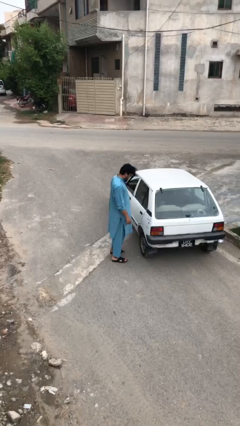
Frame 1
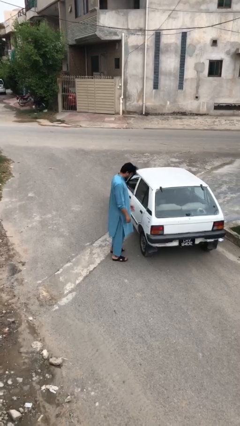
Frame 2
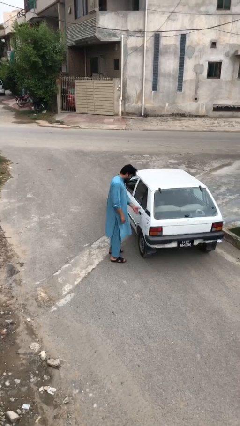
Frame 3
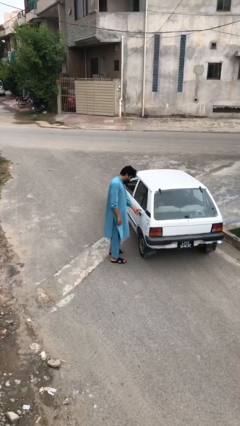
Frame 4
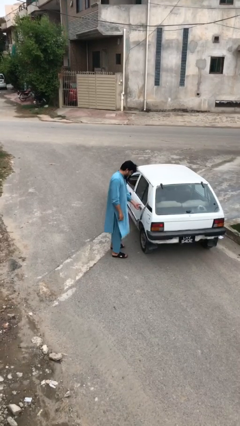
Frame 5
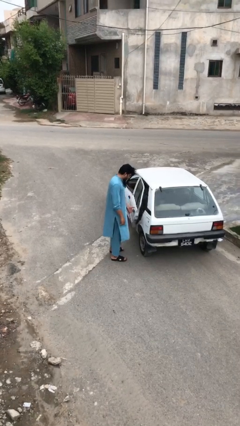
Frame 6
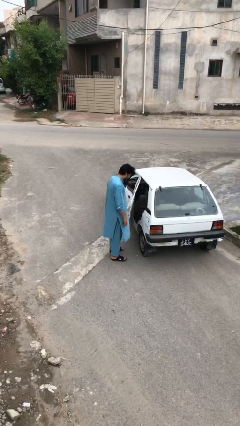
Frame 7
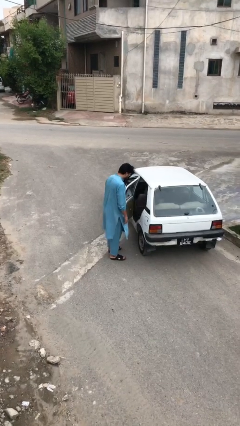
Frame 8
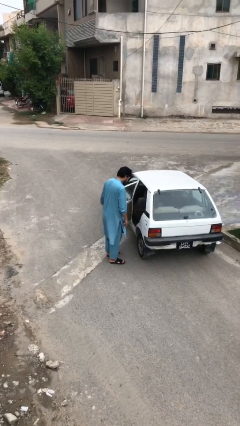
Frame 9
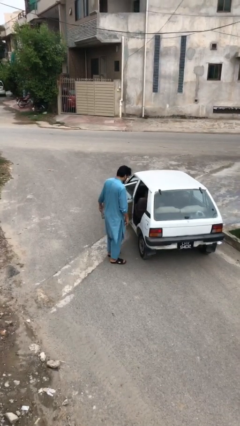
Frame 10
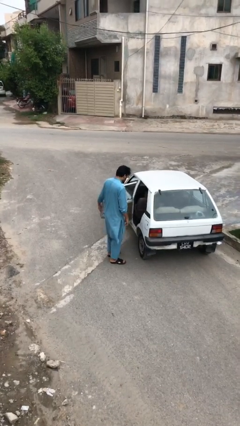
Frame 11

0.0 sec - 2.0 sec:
person opens car door

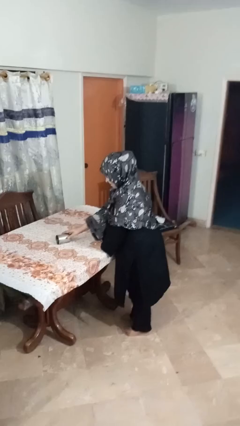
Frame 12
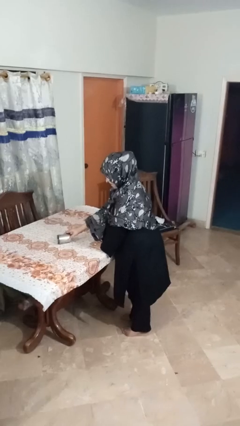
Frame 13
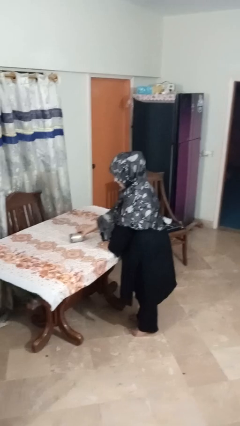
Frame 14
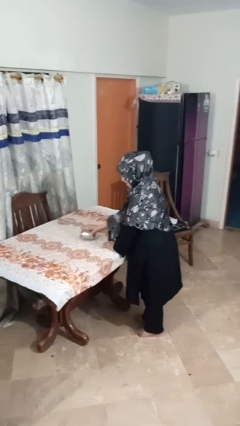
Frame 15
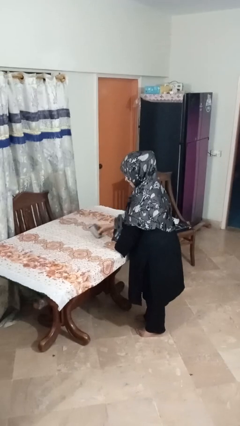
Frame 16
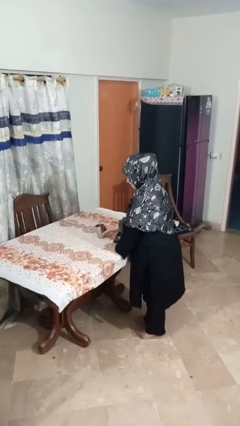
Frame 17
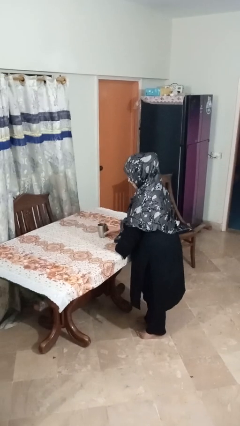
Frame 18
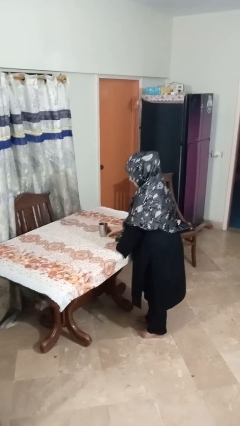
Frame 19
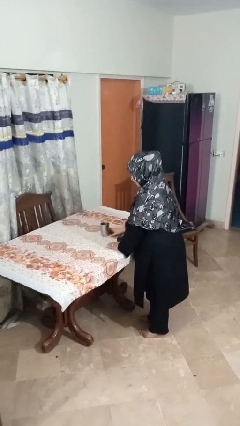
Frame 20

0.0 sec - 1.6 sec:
person knocks over glass

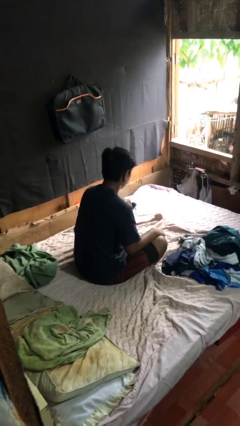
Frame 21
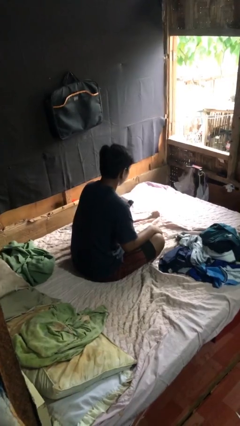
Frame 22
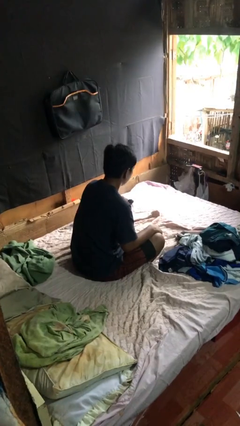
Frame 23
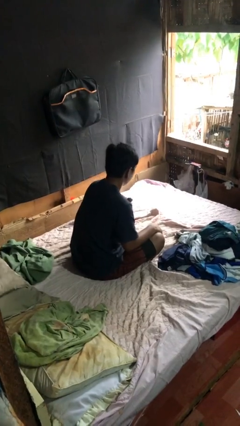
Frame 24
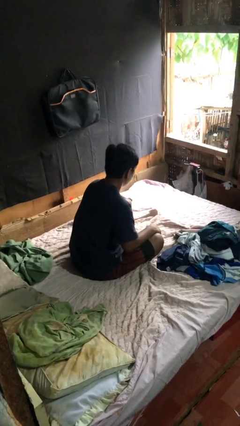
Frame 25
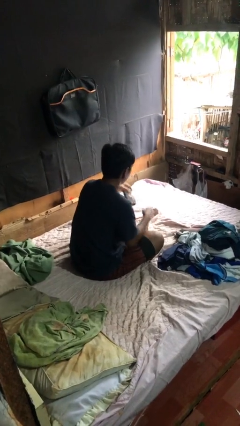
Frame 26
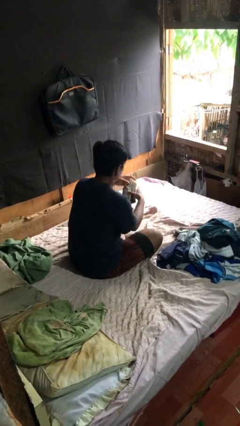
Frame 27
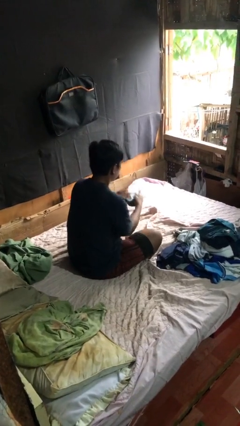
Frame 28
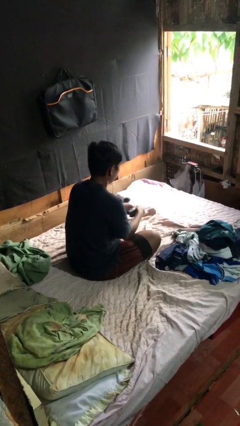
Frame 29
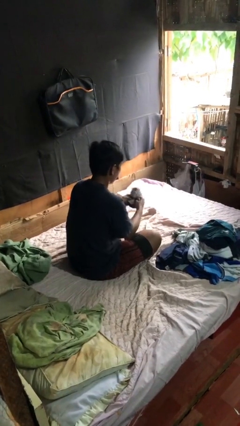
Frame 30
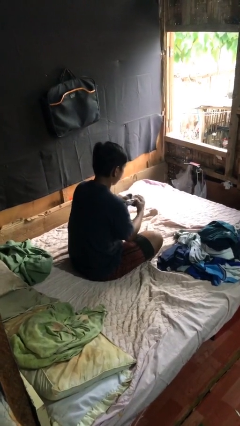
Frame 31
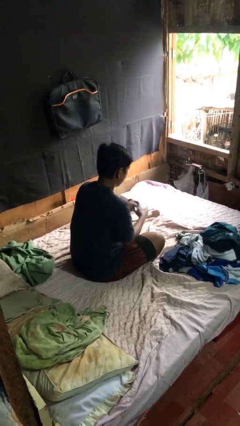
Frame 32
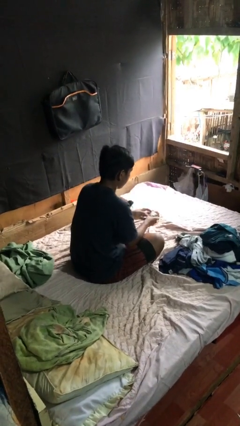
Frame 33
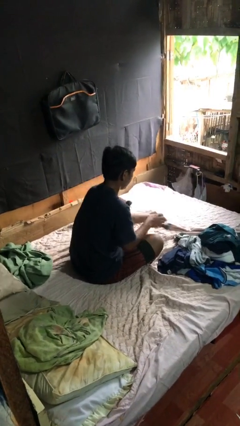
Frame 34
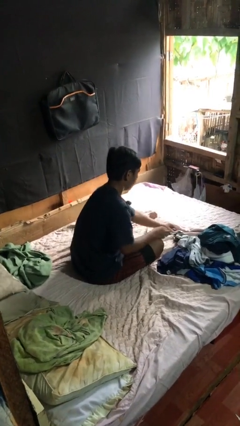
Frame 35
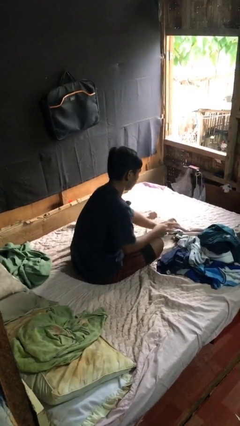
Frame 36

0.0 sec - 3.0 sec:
person folds socks

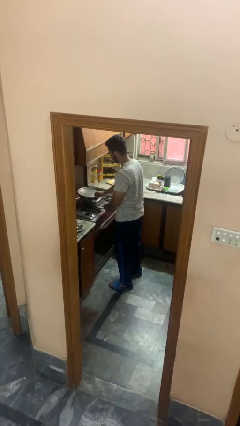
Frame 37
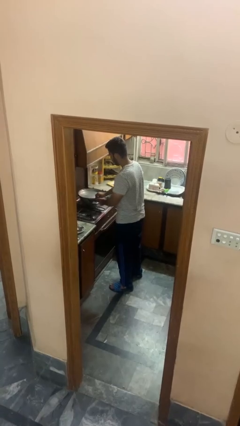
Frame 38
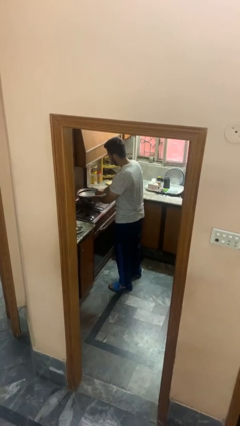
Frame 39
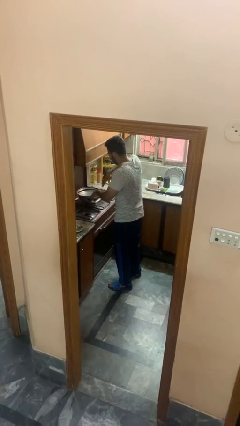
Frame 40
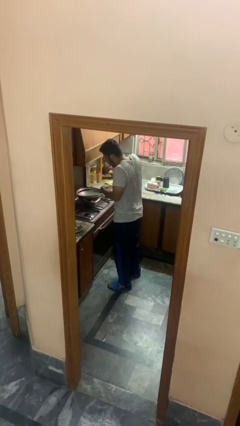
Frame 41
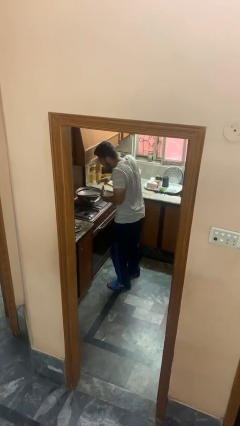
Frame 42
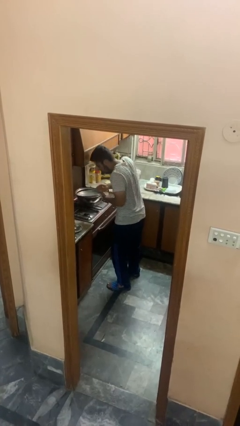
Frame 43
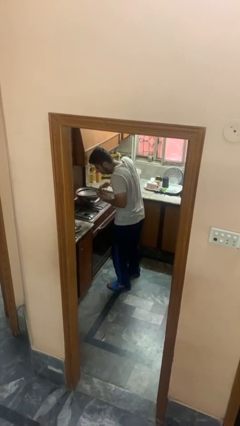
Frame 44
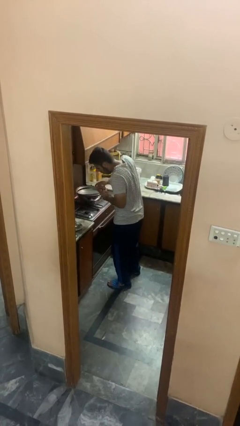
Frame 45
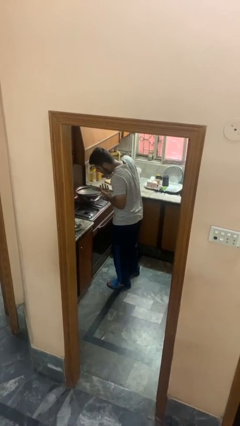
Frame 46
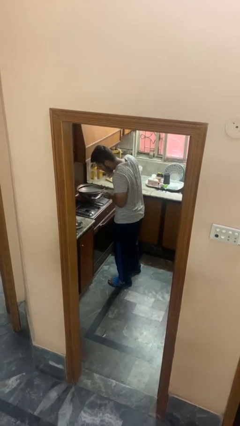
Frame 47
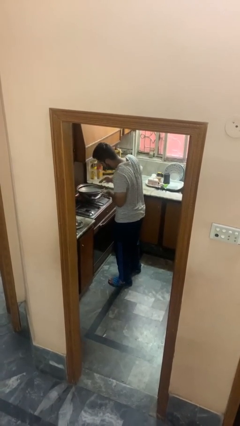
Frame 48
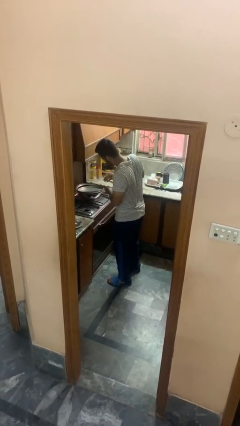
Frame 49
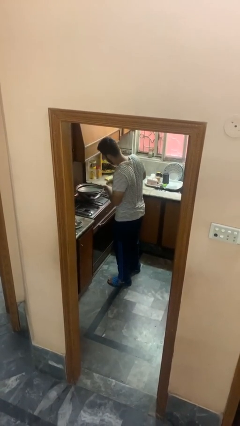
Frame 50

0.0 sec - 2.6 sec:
person burns hand

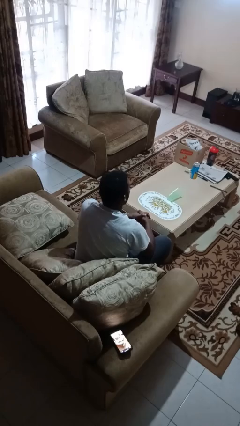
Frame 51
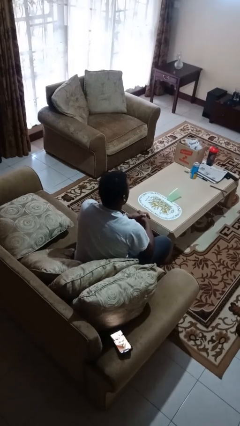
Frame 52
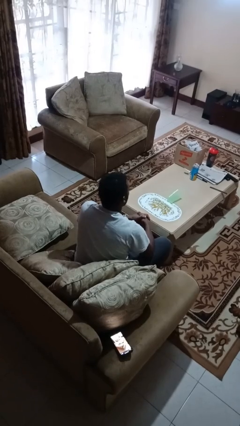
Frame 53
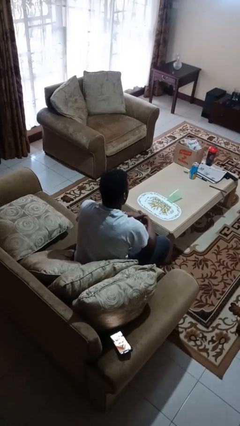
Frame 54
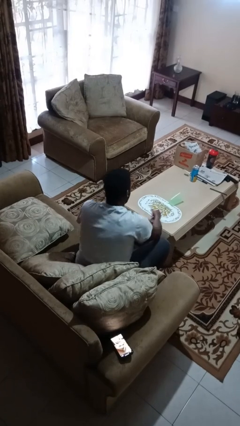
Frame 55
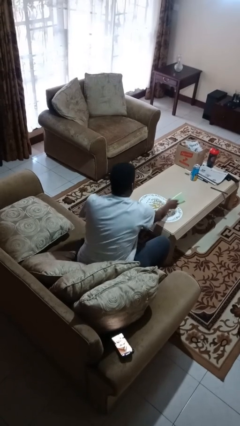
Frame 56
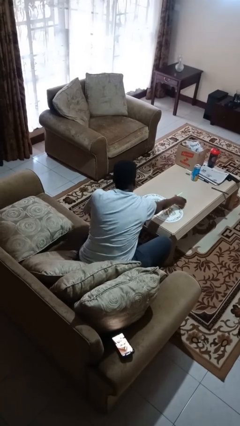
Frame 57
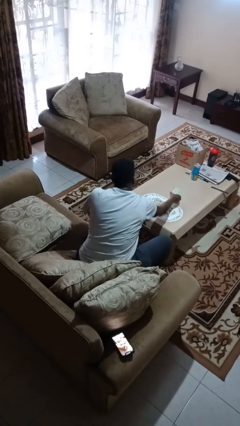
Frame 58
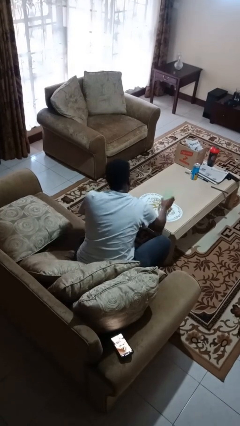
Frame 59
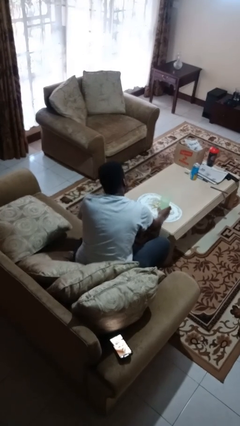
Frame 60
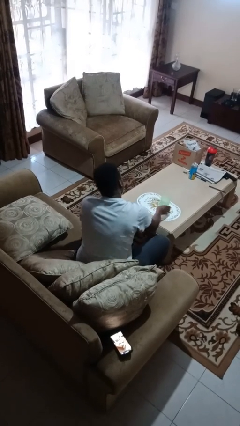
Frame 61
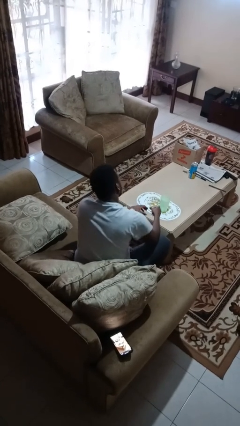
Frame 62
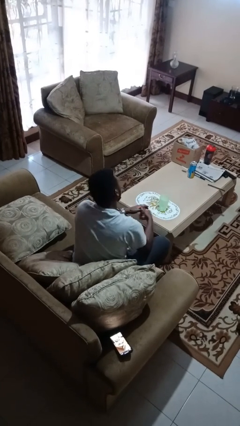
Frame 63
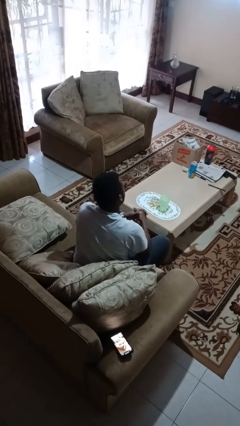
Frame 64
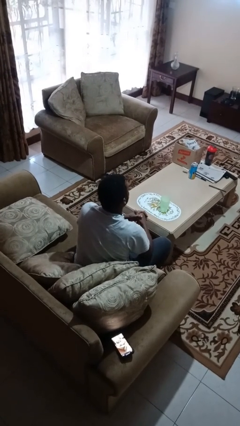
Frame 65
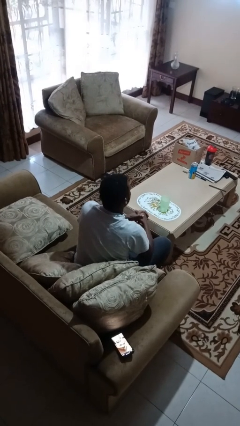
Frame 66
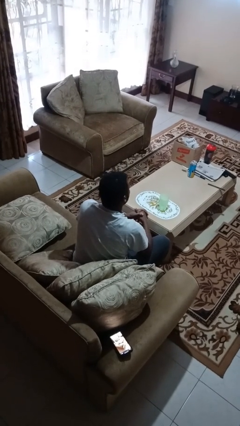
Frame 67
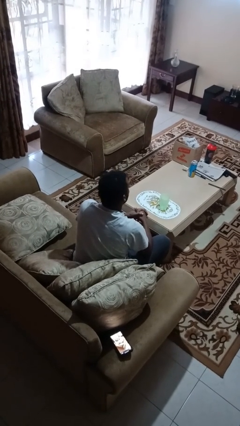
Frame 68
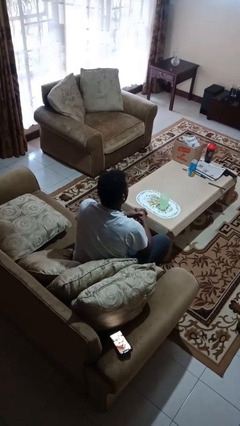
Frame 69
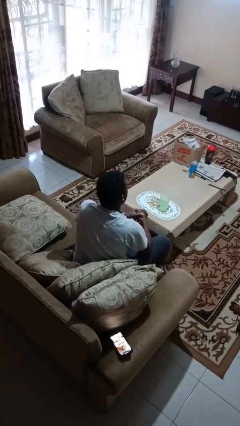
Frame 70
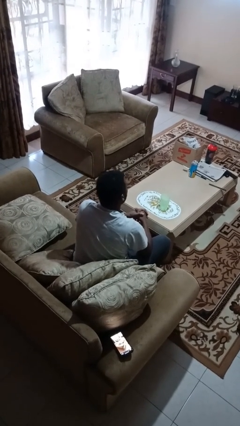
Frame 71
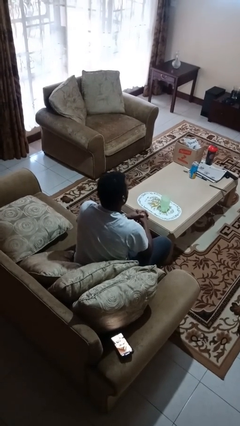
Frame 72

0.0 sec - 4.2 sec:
person sets upright glass

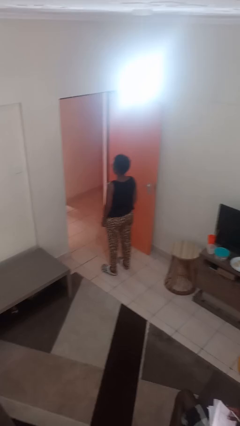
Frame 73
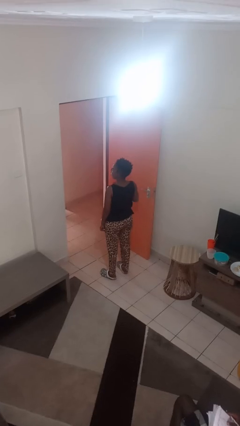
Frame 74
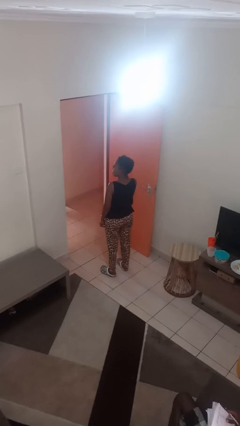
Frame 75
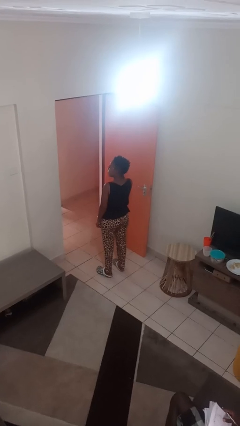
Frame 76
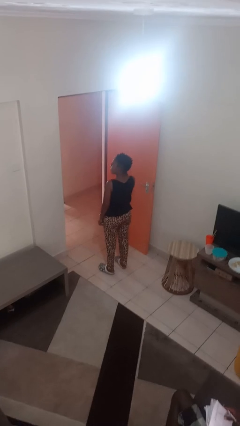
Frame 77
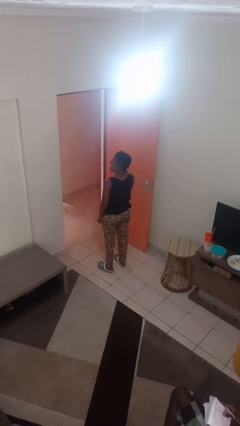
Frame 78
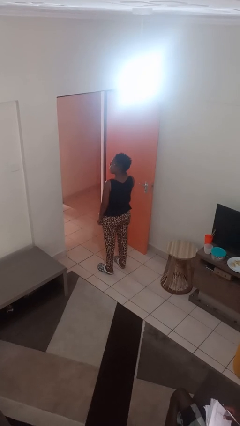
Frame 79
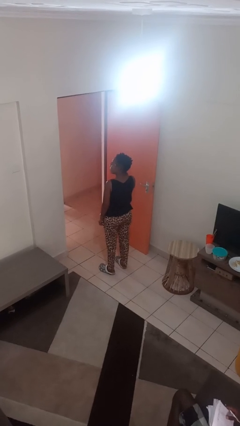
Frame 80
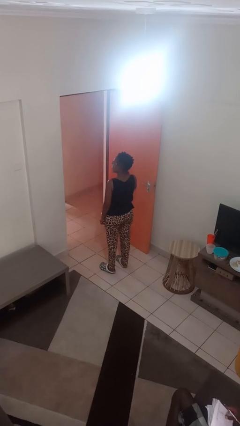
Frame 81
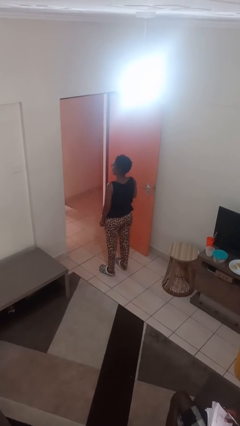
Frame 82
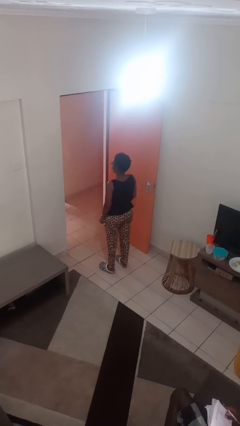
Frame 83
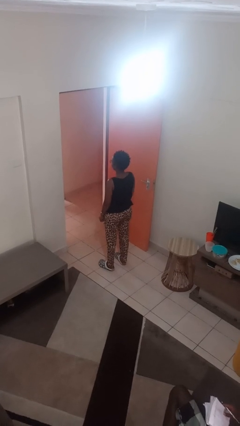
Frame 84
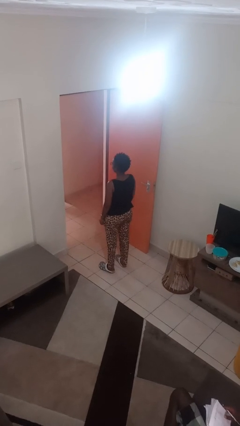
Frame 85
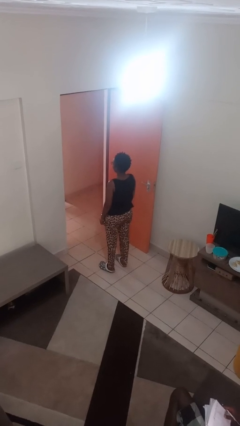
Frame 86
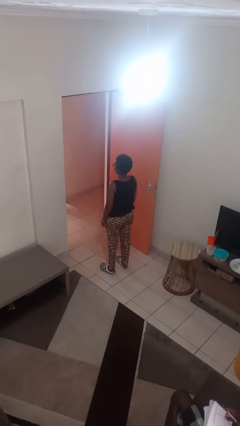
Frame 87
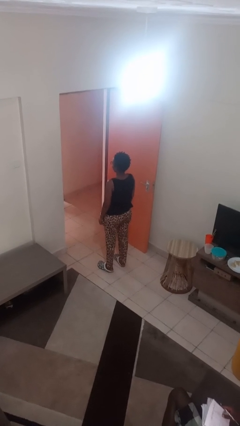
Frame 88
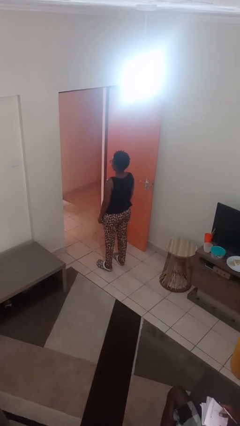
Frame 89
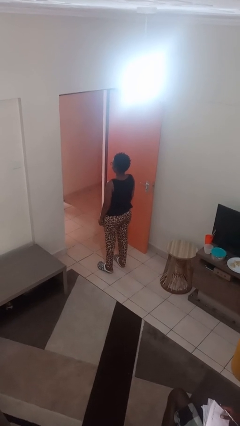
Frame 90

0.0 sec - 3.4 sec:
person takes off earrings

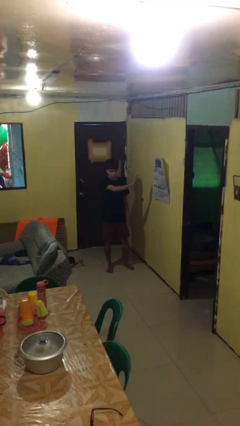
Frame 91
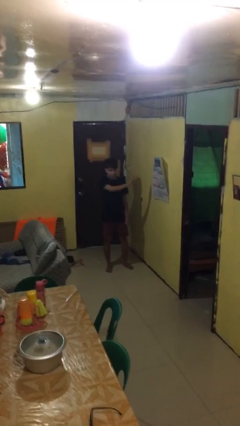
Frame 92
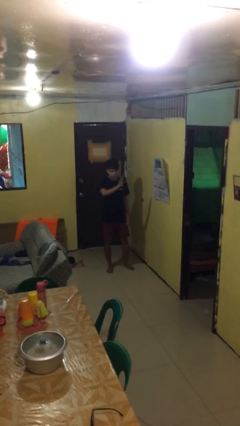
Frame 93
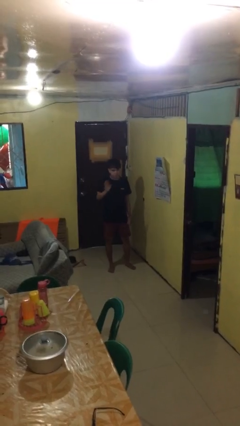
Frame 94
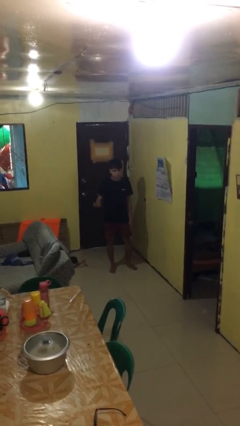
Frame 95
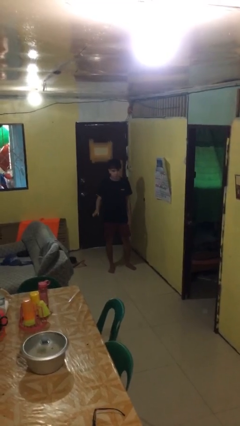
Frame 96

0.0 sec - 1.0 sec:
person gestures swipe right
